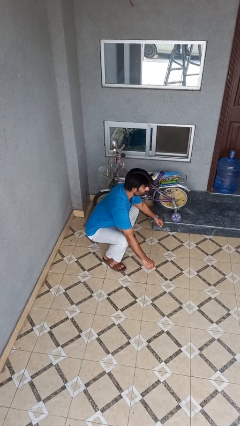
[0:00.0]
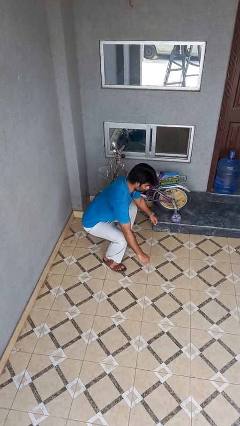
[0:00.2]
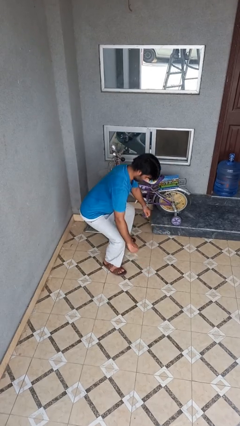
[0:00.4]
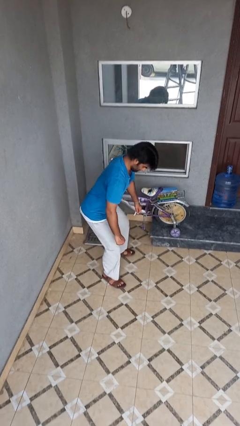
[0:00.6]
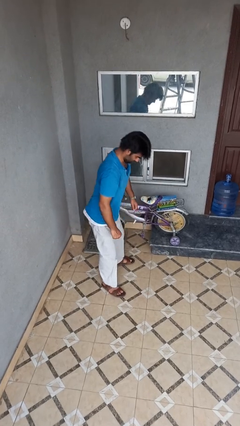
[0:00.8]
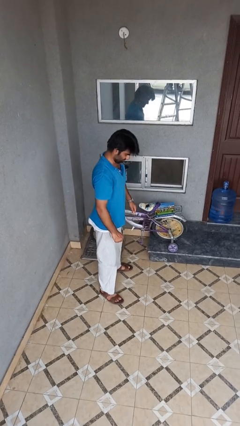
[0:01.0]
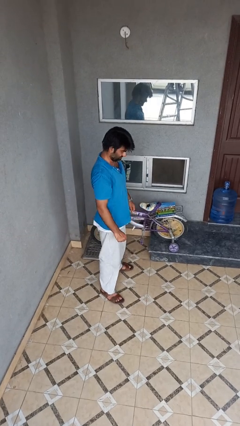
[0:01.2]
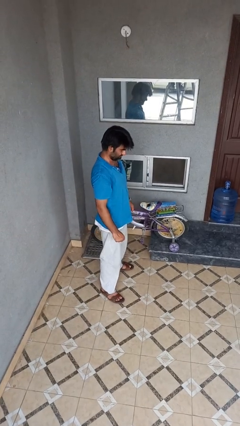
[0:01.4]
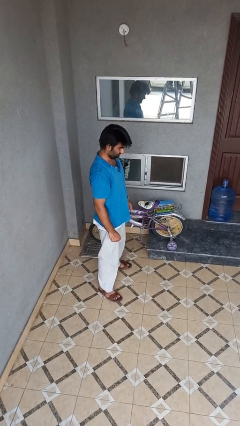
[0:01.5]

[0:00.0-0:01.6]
person stands up

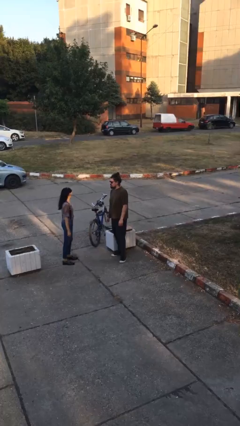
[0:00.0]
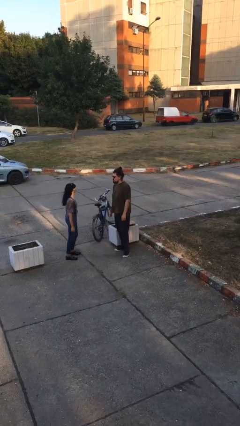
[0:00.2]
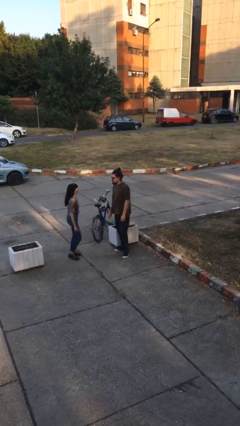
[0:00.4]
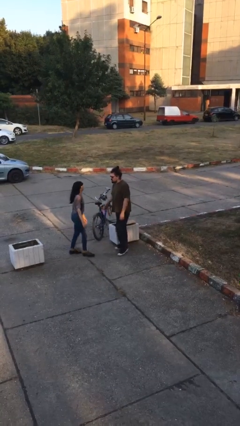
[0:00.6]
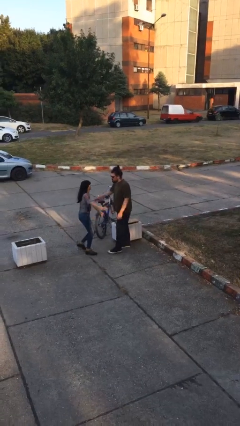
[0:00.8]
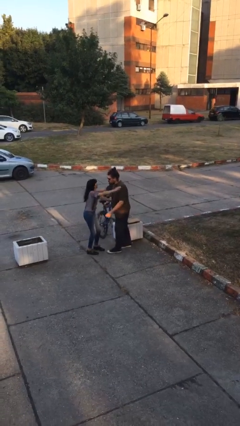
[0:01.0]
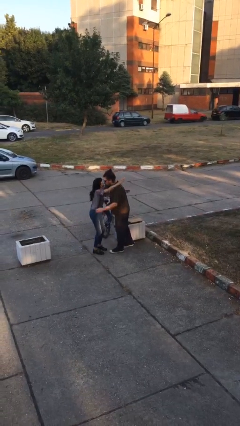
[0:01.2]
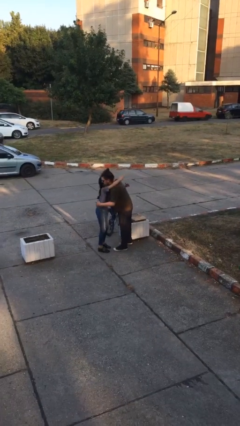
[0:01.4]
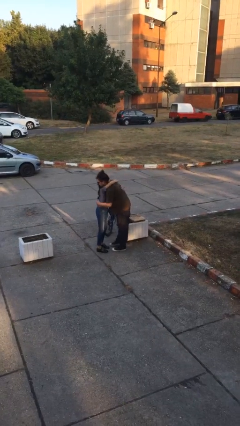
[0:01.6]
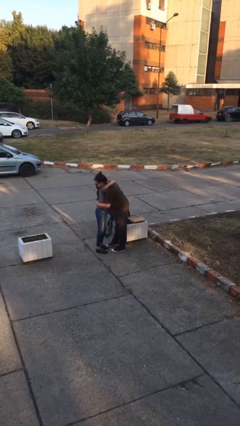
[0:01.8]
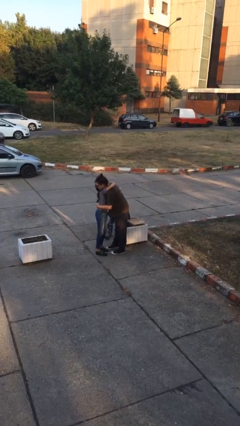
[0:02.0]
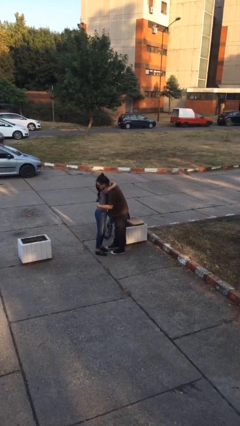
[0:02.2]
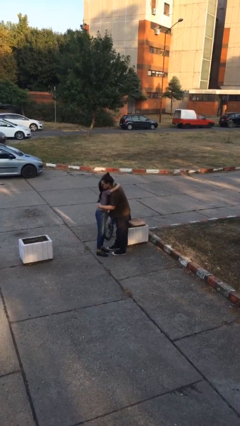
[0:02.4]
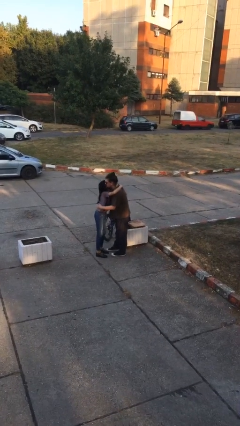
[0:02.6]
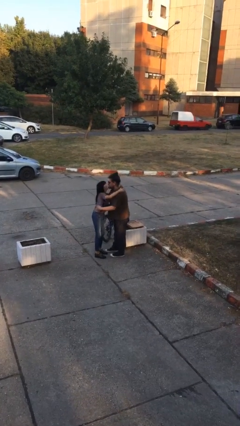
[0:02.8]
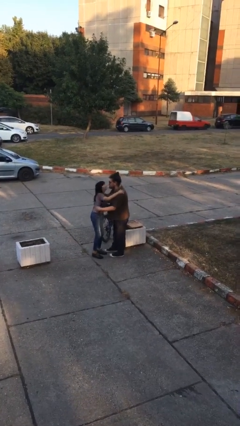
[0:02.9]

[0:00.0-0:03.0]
person embraces person

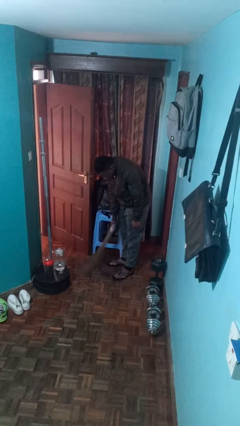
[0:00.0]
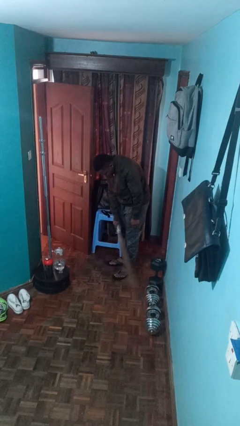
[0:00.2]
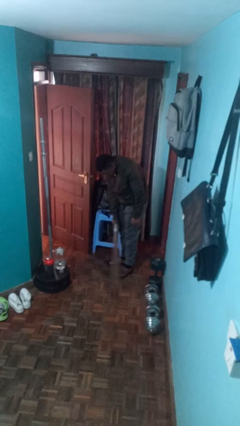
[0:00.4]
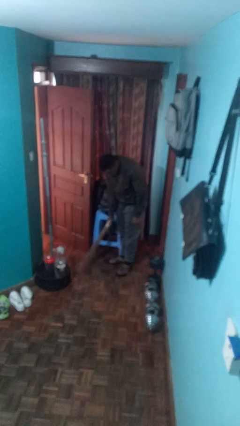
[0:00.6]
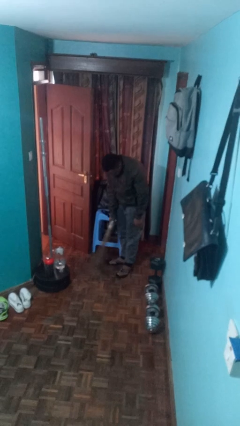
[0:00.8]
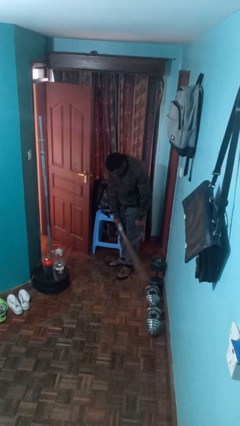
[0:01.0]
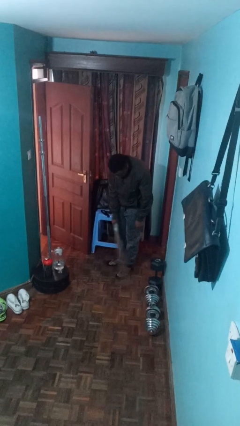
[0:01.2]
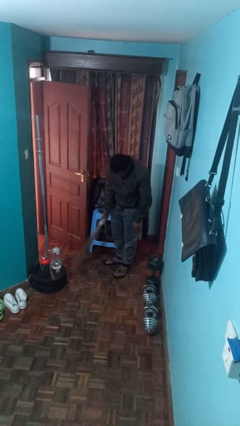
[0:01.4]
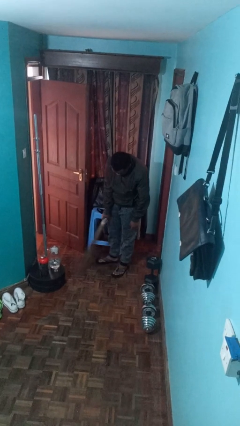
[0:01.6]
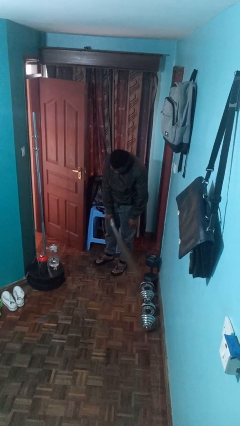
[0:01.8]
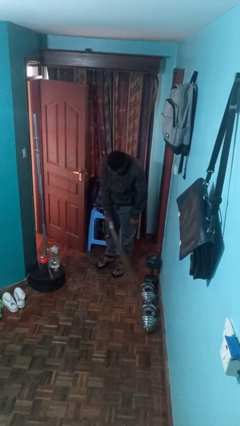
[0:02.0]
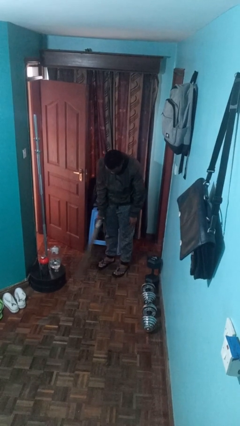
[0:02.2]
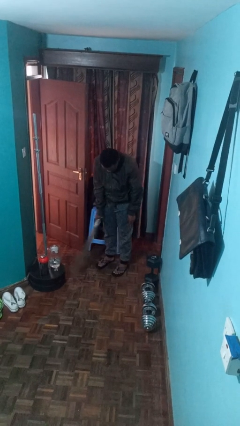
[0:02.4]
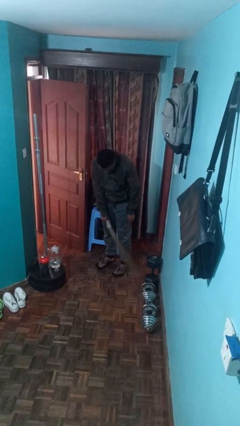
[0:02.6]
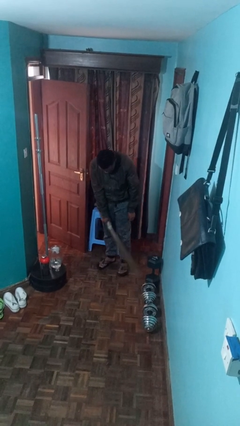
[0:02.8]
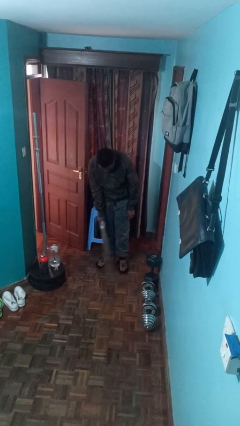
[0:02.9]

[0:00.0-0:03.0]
person sweeps floor

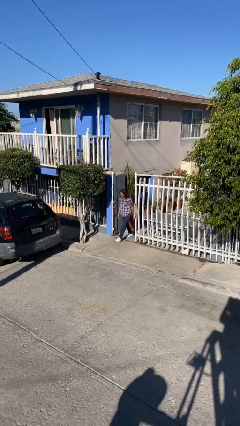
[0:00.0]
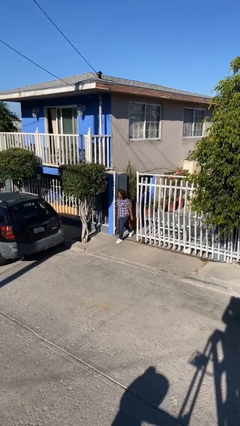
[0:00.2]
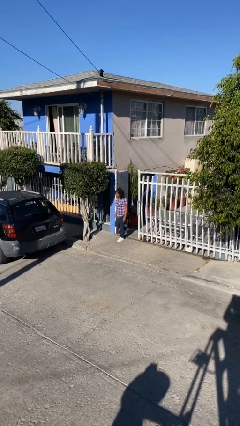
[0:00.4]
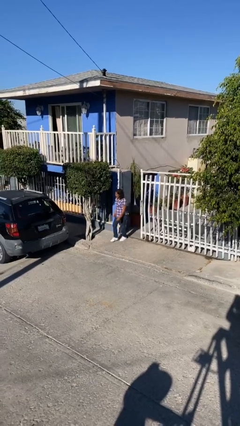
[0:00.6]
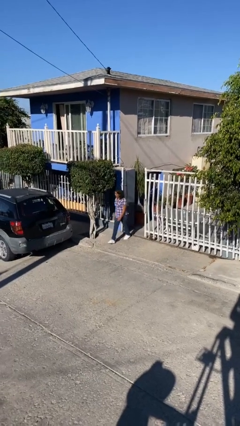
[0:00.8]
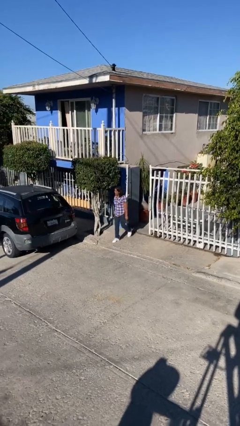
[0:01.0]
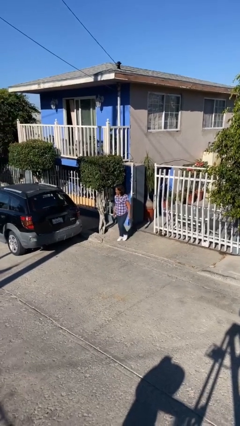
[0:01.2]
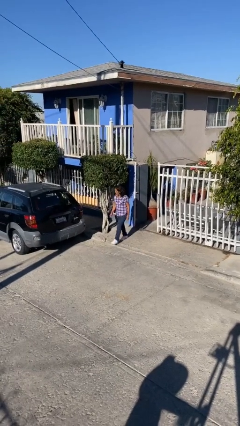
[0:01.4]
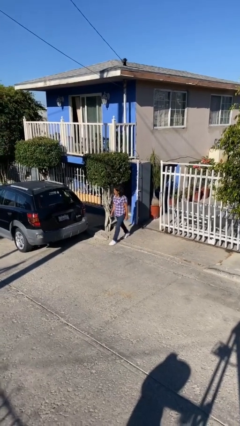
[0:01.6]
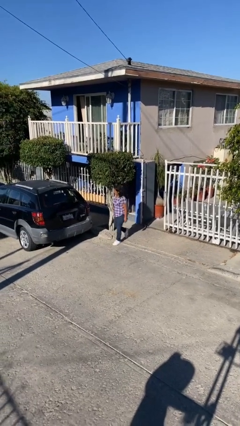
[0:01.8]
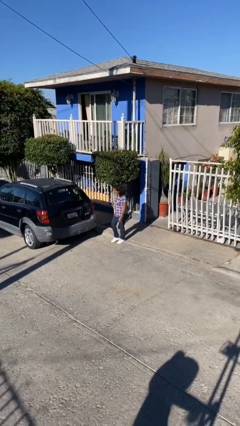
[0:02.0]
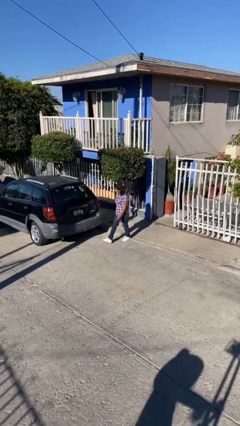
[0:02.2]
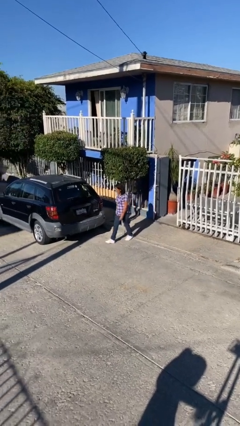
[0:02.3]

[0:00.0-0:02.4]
person enters scene through structure

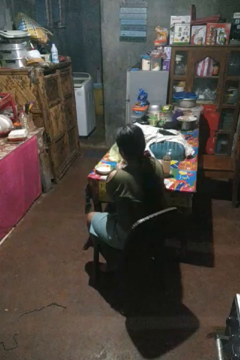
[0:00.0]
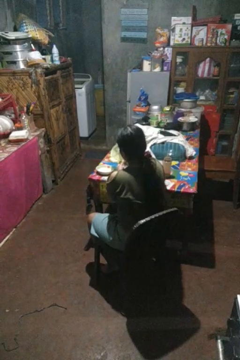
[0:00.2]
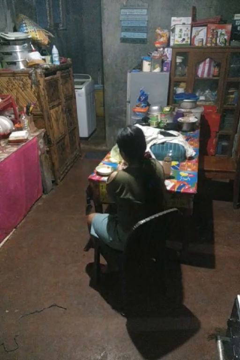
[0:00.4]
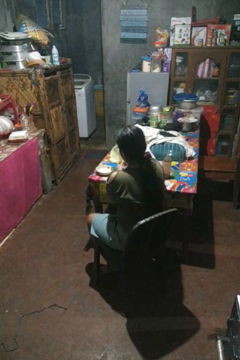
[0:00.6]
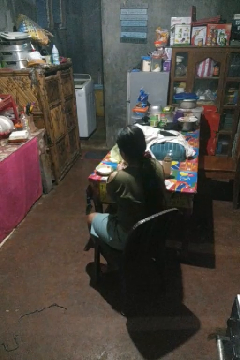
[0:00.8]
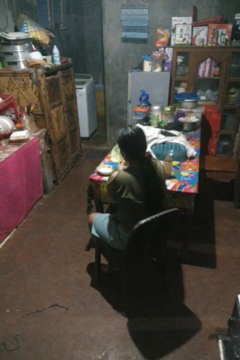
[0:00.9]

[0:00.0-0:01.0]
person pours into bowl

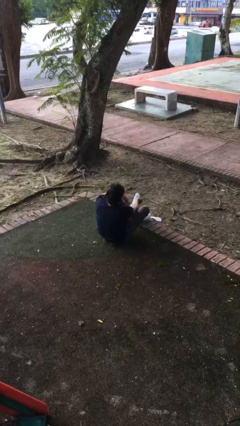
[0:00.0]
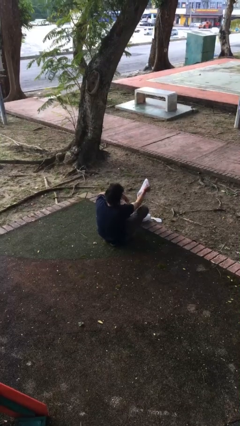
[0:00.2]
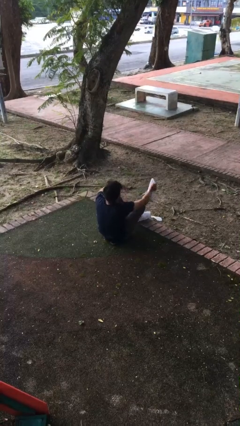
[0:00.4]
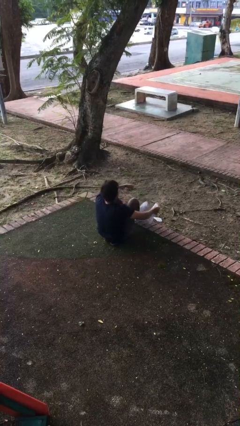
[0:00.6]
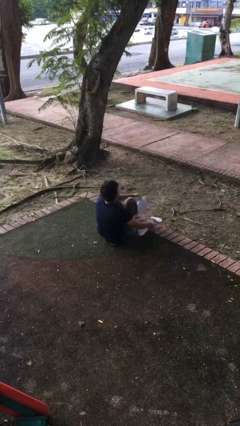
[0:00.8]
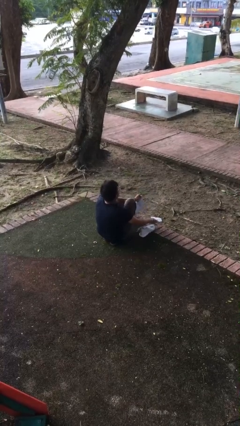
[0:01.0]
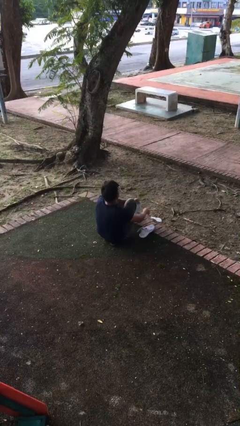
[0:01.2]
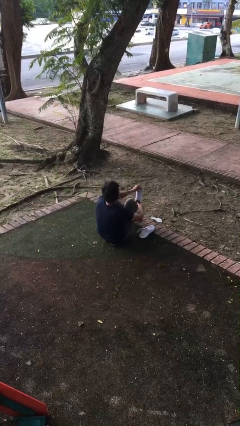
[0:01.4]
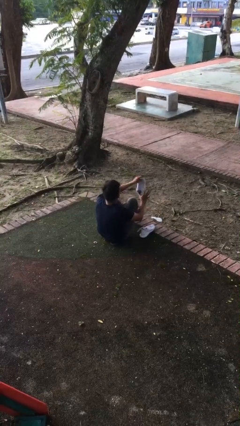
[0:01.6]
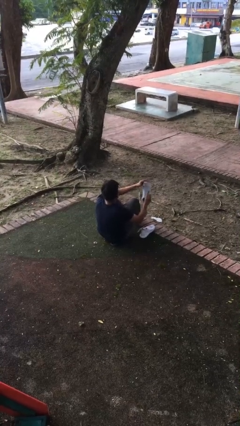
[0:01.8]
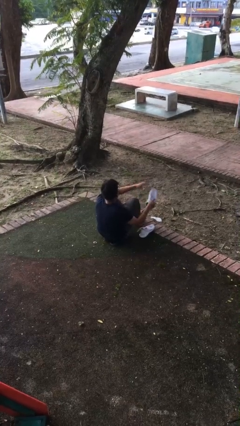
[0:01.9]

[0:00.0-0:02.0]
person takes off shoes

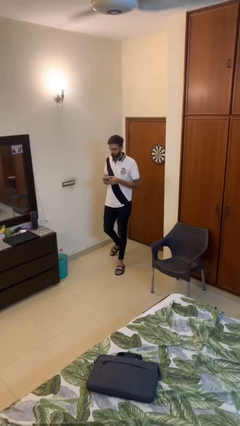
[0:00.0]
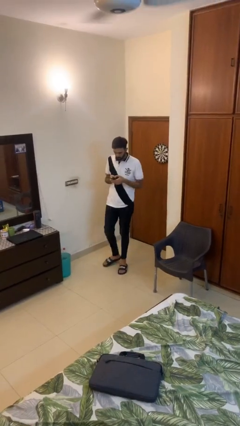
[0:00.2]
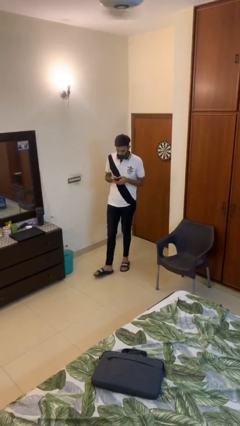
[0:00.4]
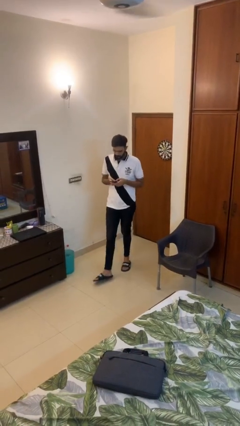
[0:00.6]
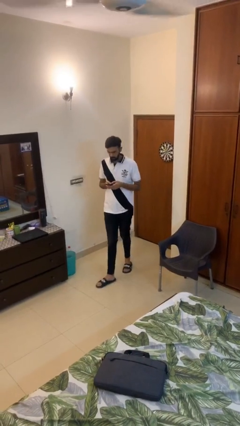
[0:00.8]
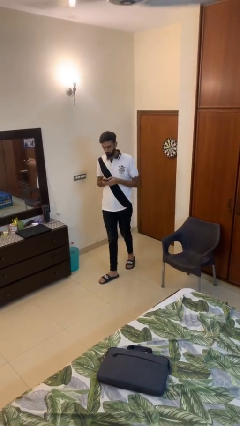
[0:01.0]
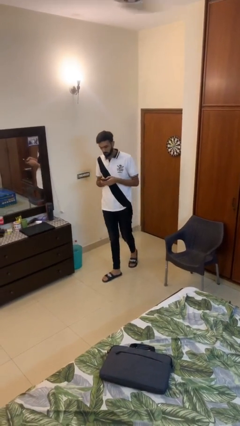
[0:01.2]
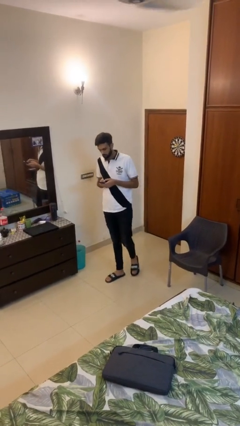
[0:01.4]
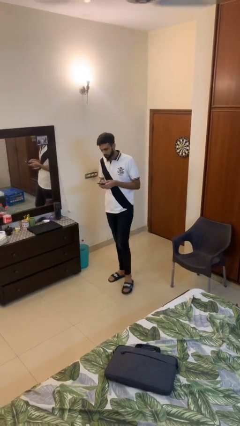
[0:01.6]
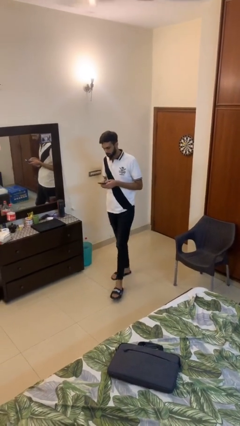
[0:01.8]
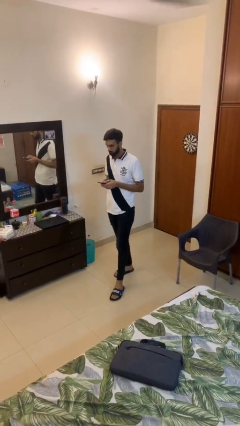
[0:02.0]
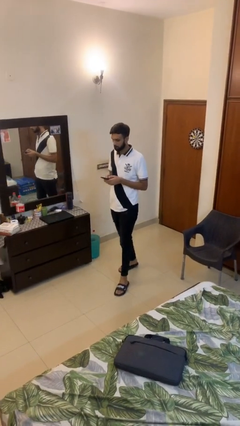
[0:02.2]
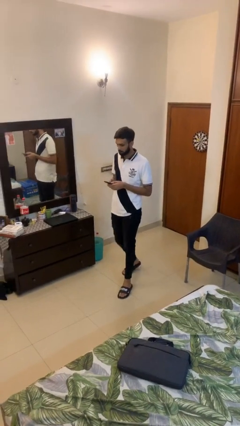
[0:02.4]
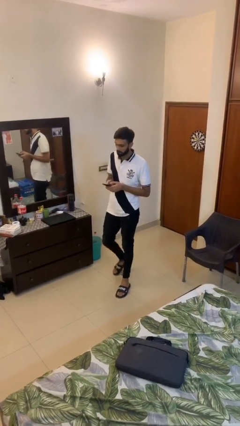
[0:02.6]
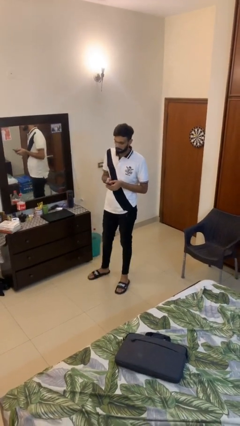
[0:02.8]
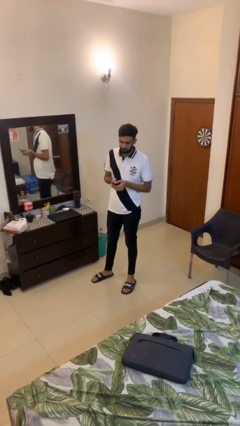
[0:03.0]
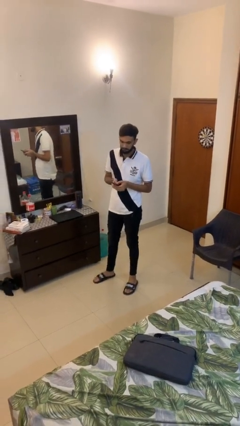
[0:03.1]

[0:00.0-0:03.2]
person texts on phone

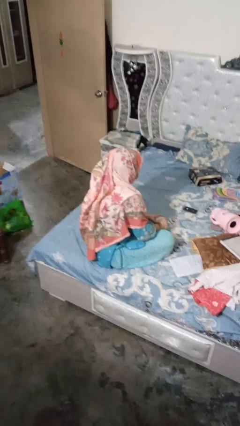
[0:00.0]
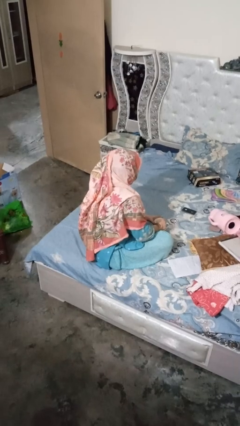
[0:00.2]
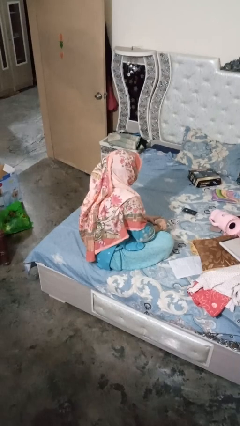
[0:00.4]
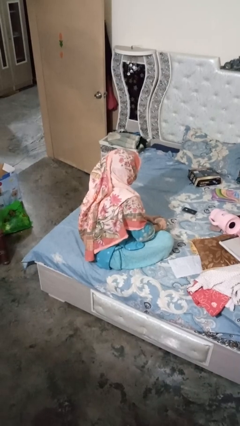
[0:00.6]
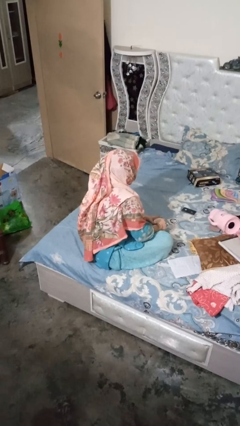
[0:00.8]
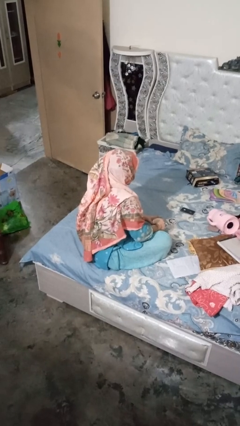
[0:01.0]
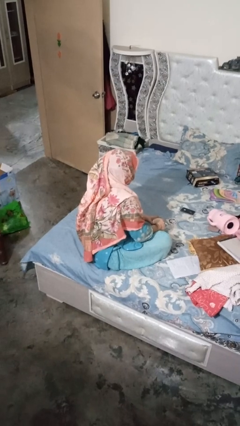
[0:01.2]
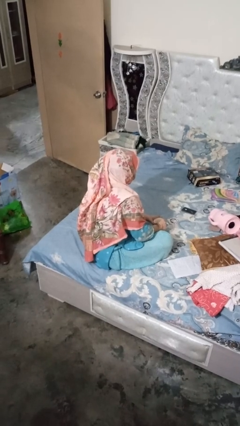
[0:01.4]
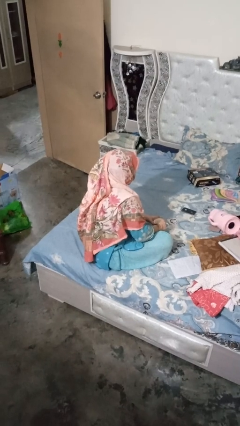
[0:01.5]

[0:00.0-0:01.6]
person stirs mug
